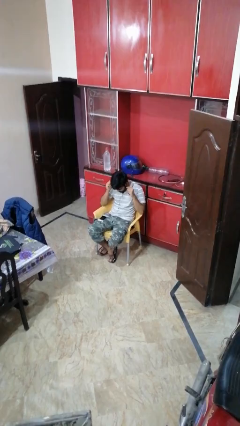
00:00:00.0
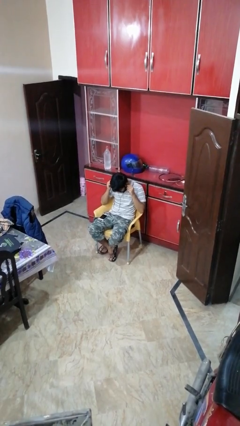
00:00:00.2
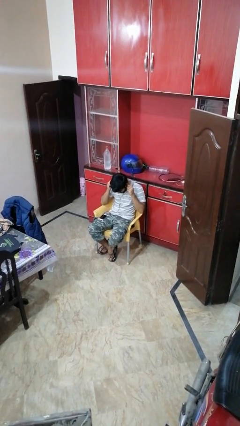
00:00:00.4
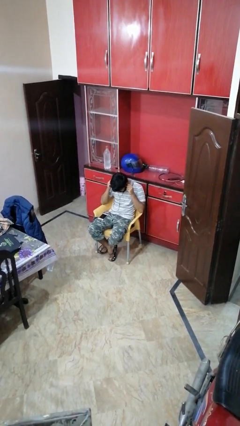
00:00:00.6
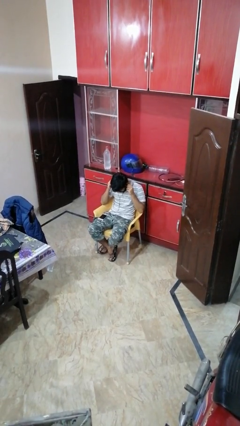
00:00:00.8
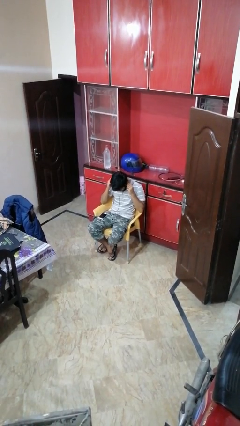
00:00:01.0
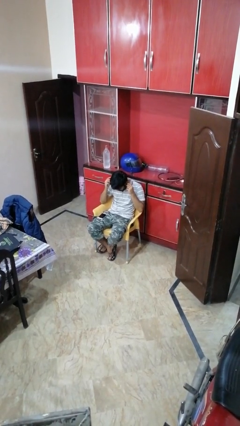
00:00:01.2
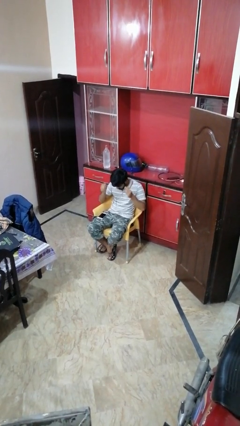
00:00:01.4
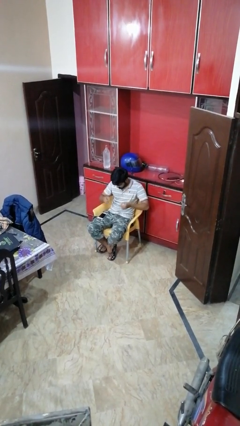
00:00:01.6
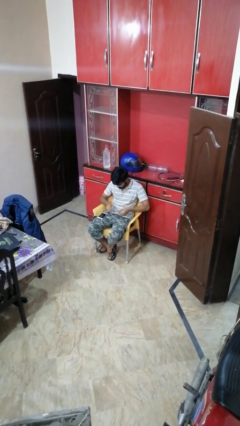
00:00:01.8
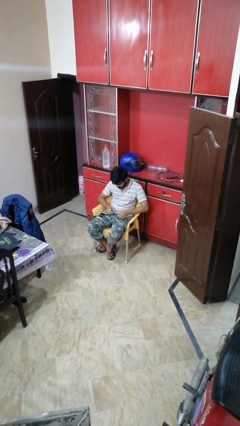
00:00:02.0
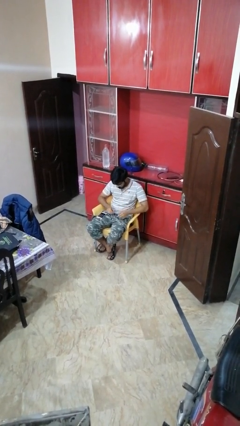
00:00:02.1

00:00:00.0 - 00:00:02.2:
person takes off headphones

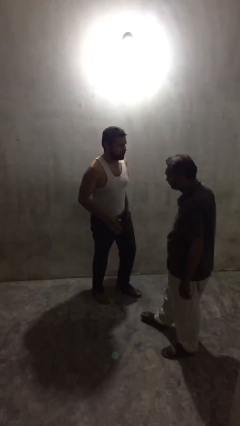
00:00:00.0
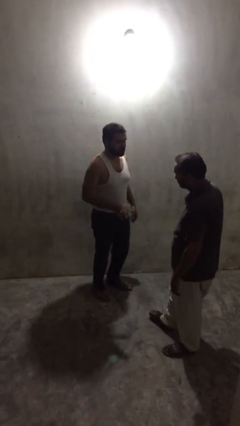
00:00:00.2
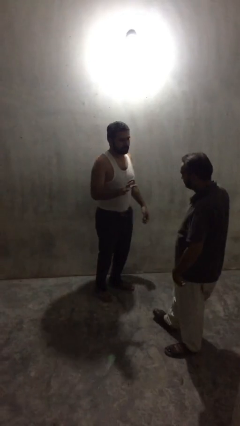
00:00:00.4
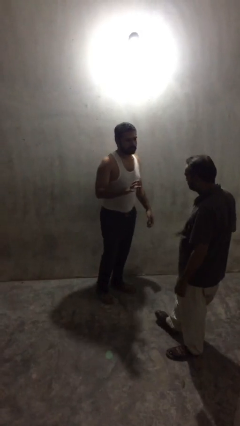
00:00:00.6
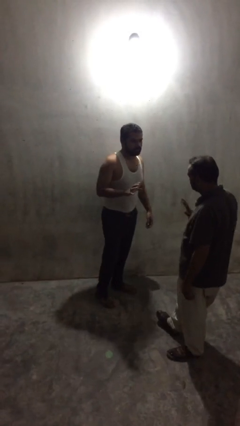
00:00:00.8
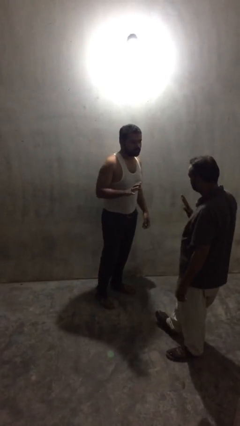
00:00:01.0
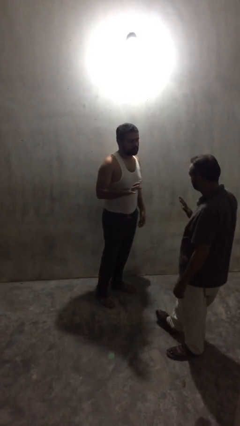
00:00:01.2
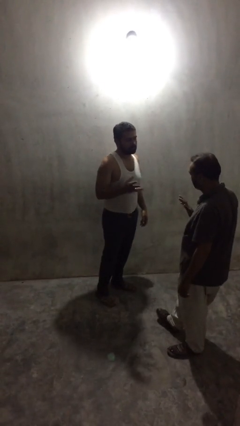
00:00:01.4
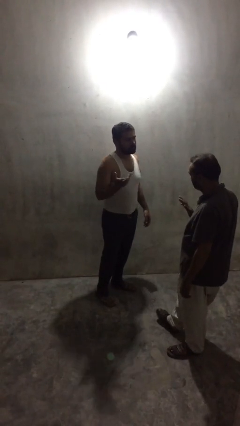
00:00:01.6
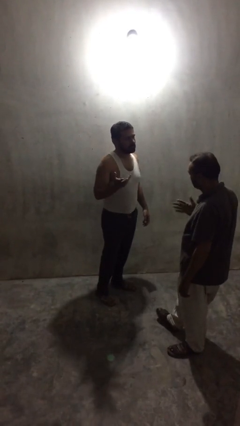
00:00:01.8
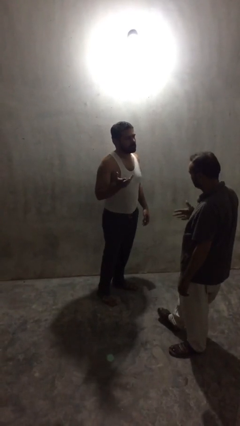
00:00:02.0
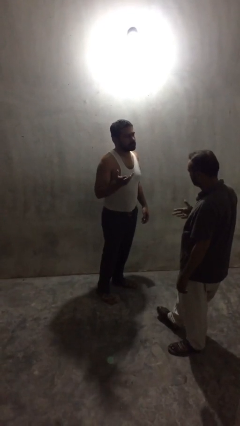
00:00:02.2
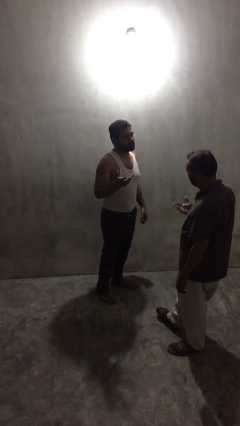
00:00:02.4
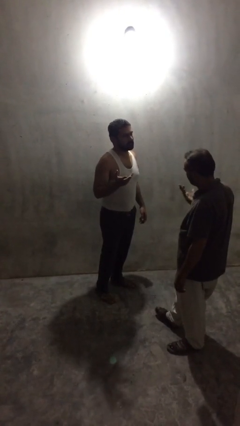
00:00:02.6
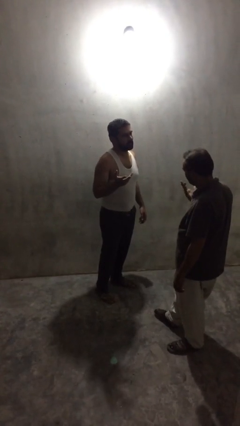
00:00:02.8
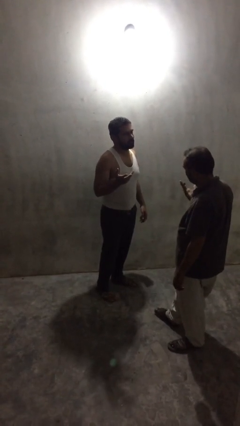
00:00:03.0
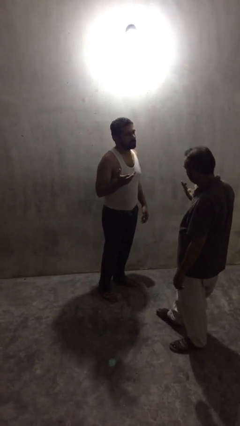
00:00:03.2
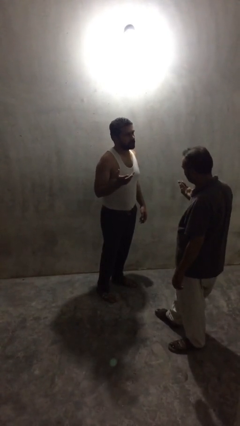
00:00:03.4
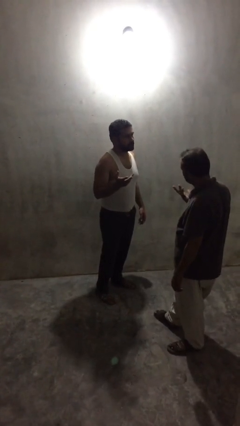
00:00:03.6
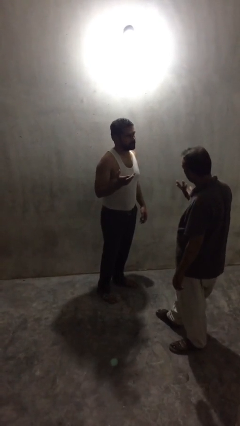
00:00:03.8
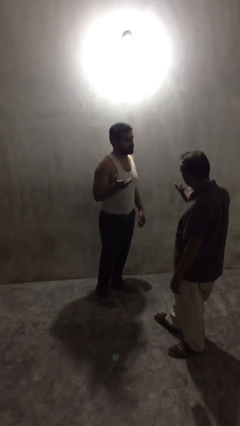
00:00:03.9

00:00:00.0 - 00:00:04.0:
person talks to person

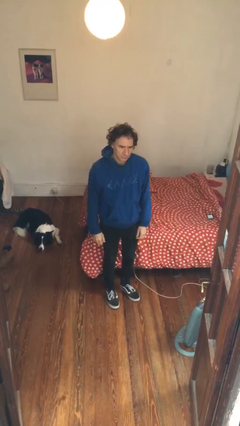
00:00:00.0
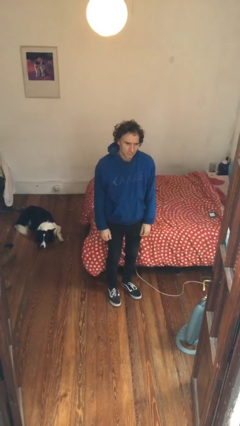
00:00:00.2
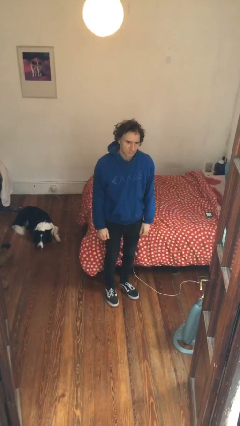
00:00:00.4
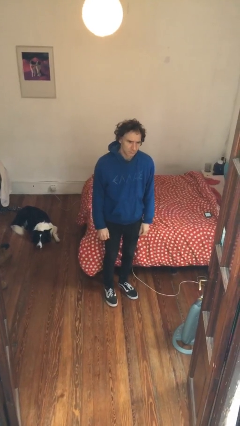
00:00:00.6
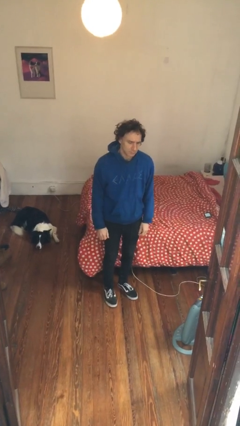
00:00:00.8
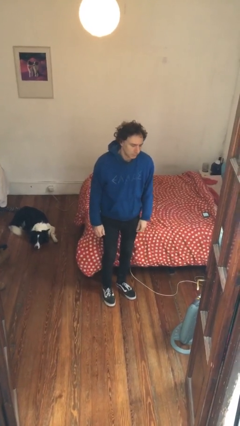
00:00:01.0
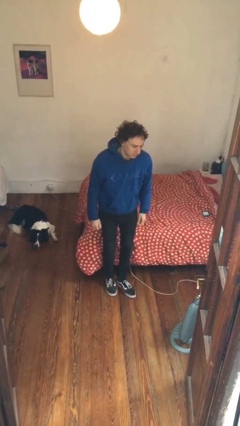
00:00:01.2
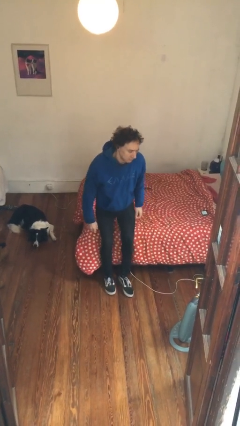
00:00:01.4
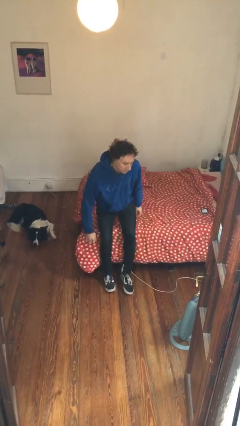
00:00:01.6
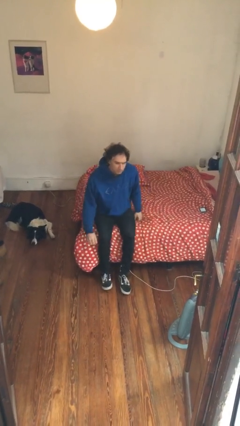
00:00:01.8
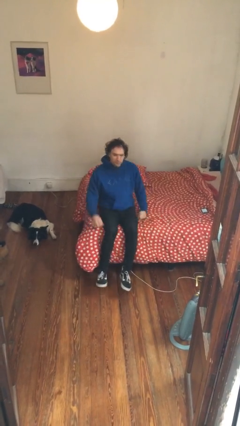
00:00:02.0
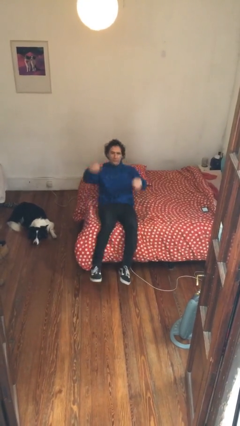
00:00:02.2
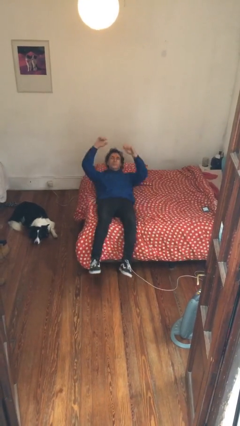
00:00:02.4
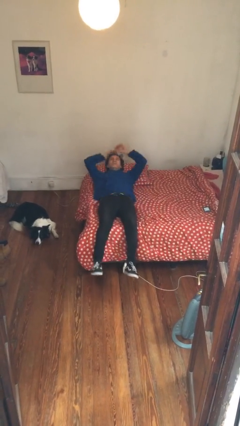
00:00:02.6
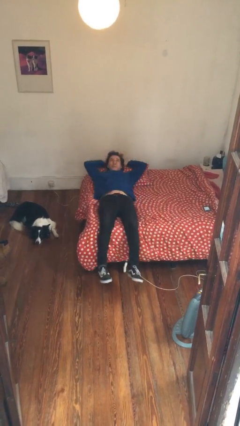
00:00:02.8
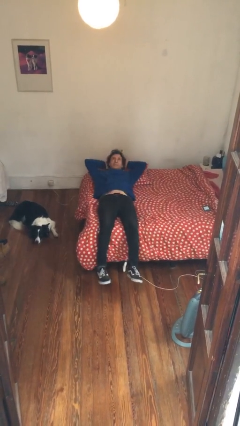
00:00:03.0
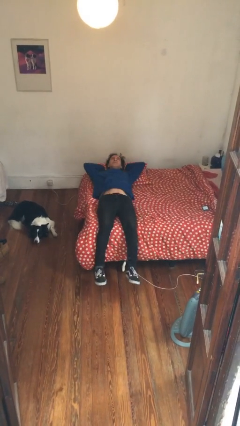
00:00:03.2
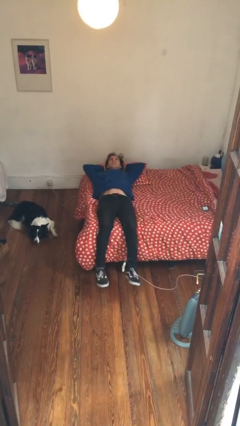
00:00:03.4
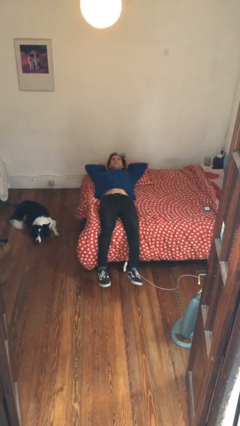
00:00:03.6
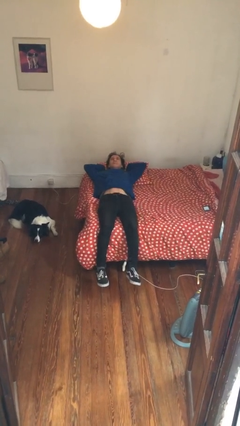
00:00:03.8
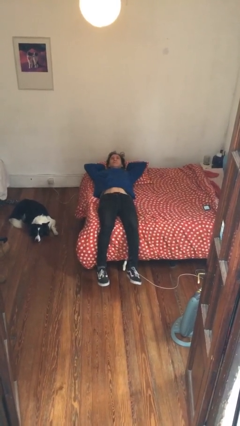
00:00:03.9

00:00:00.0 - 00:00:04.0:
person lies down on bed

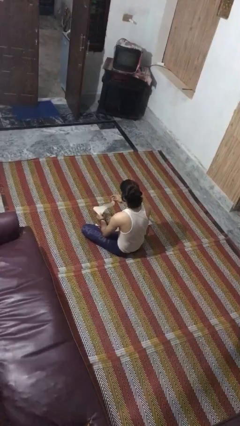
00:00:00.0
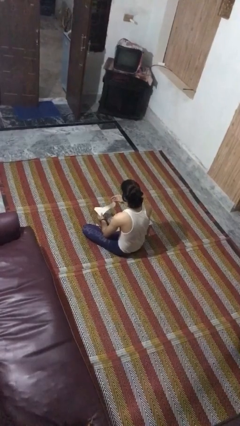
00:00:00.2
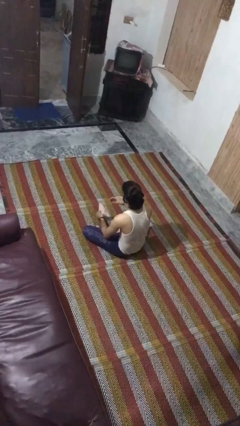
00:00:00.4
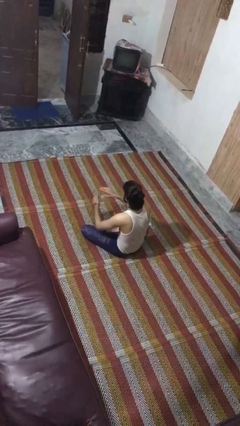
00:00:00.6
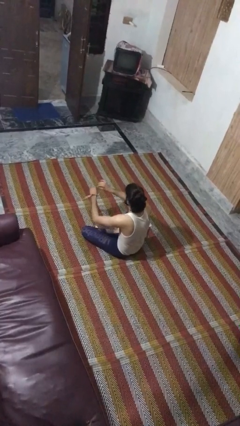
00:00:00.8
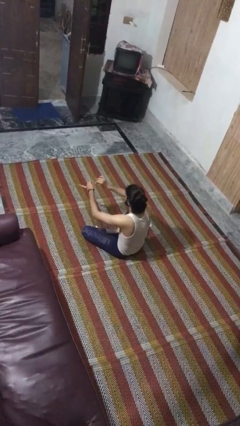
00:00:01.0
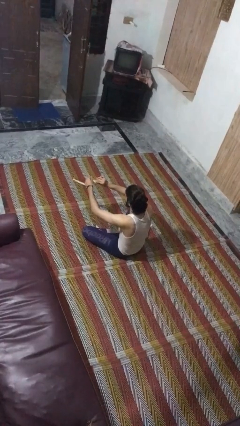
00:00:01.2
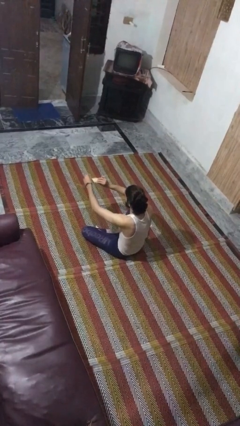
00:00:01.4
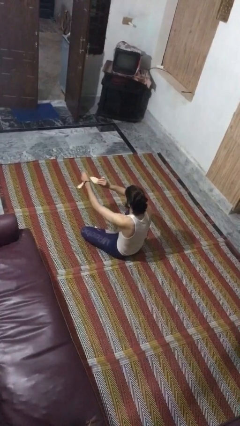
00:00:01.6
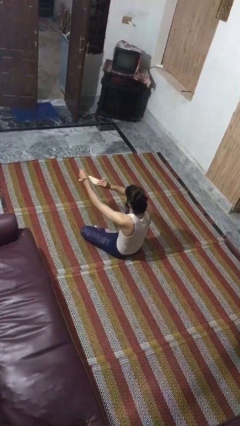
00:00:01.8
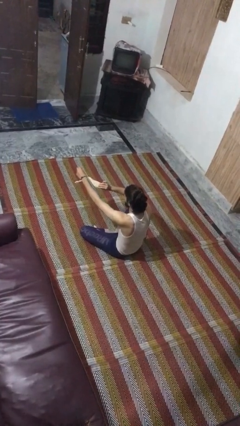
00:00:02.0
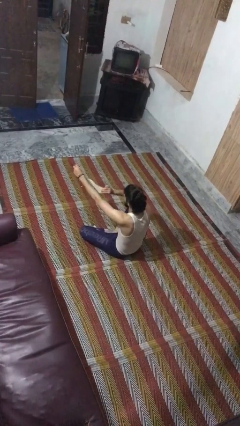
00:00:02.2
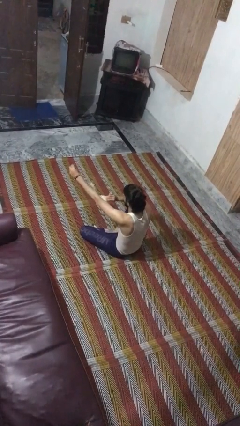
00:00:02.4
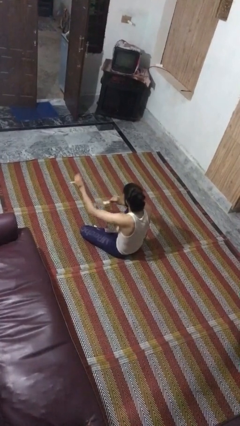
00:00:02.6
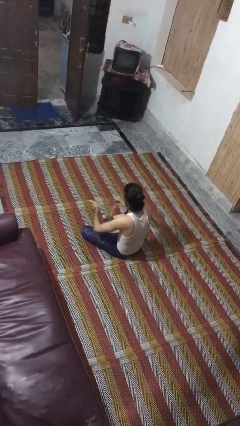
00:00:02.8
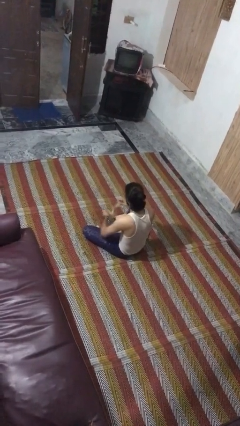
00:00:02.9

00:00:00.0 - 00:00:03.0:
person tears paper

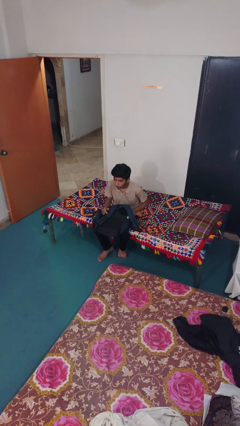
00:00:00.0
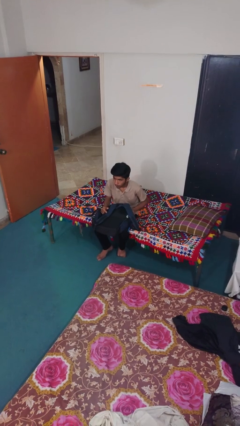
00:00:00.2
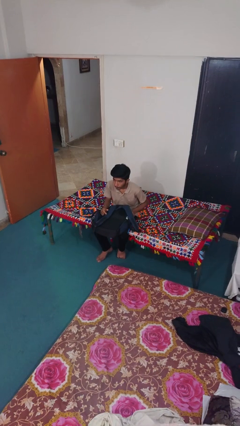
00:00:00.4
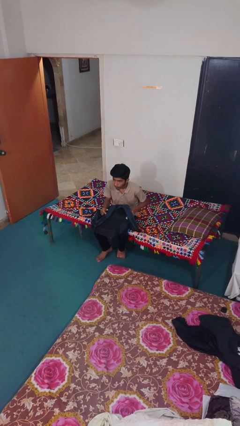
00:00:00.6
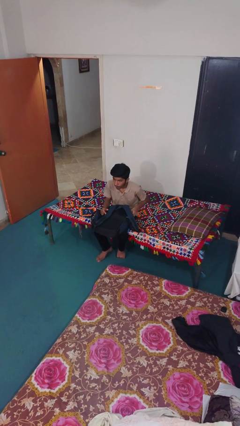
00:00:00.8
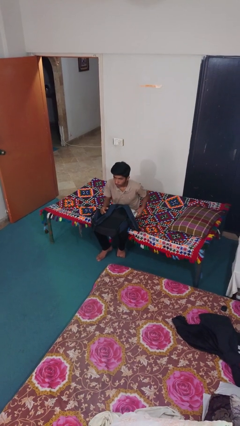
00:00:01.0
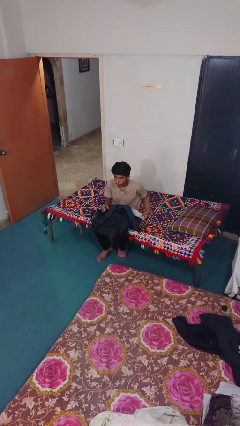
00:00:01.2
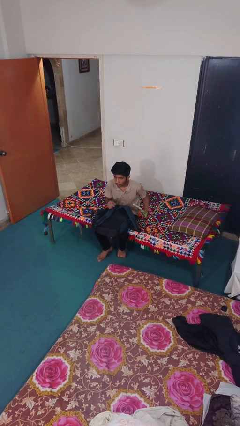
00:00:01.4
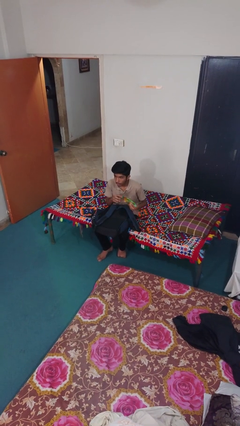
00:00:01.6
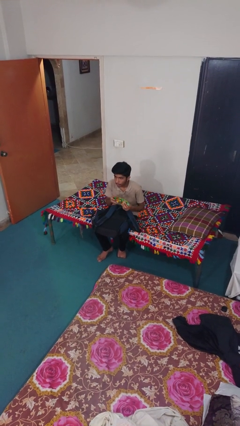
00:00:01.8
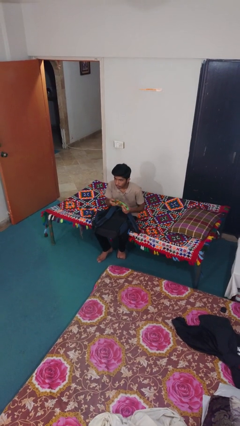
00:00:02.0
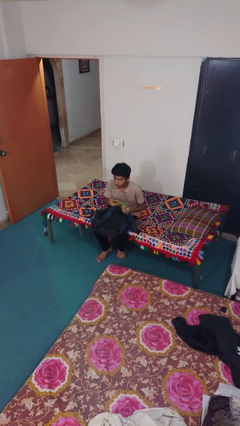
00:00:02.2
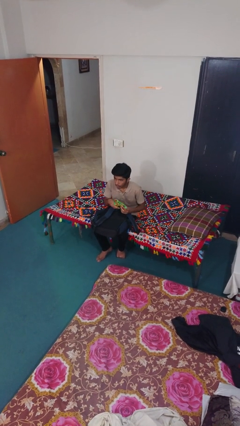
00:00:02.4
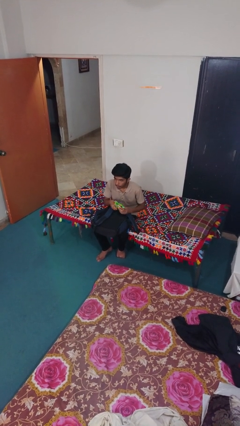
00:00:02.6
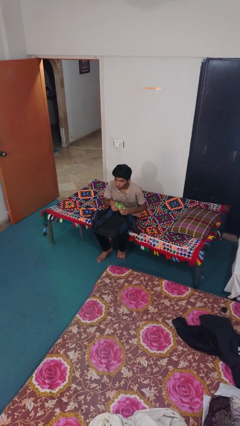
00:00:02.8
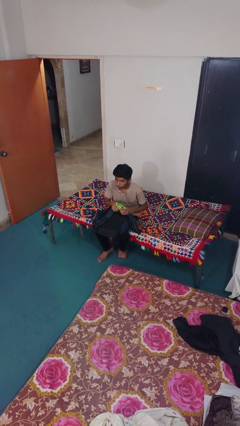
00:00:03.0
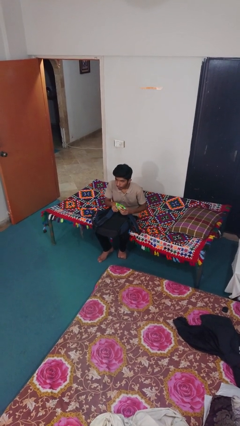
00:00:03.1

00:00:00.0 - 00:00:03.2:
person eats snack from bag

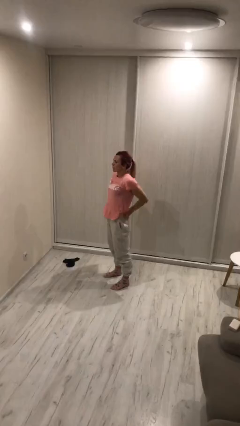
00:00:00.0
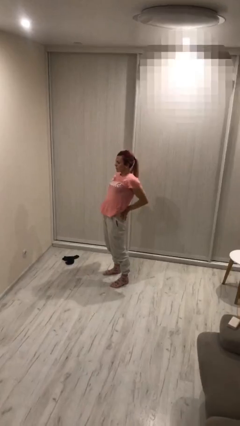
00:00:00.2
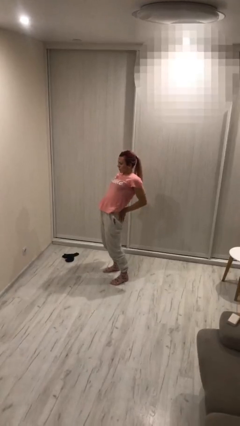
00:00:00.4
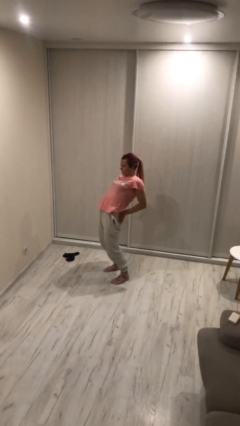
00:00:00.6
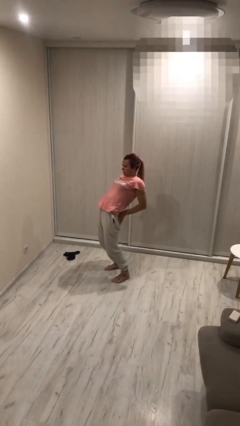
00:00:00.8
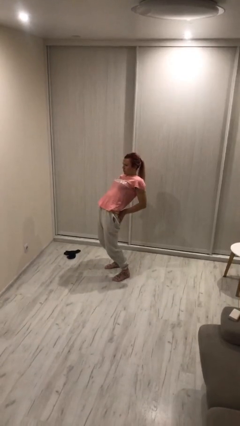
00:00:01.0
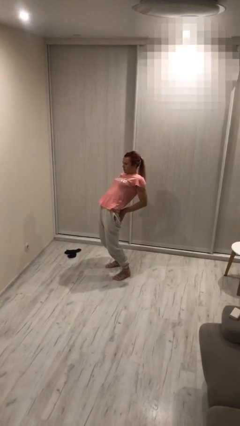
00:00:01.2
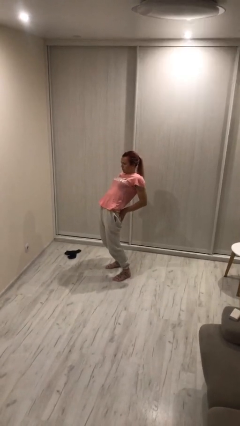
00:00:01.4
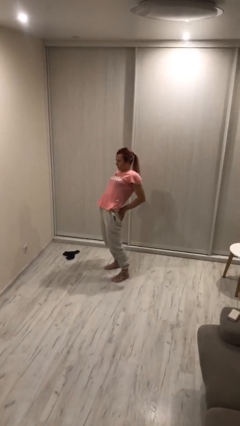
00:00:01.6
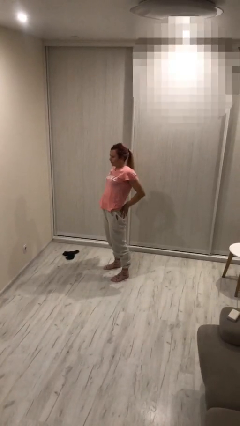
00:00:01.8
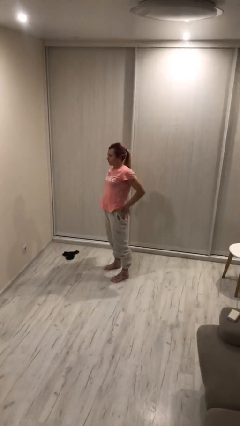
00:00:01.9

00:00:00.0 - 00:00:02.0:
person stretches back
